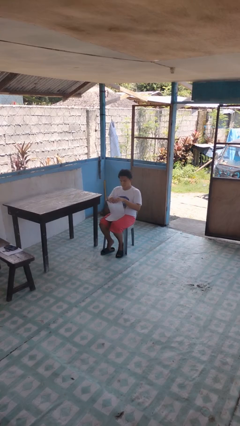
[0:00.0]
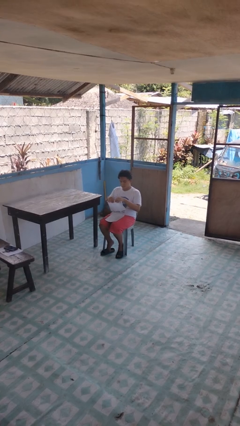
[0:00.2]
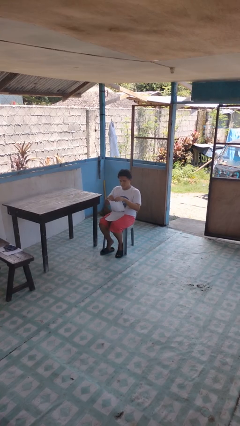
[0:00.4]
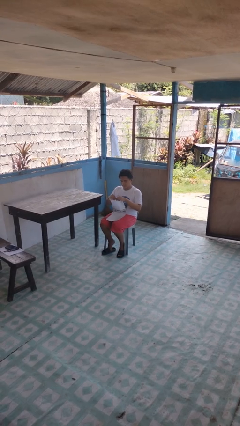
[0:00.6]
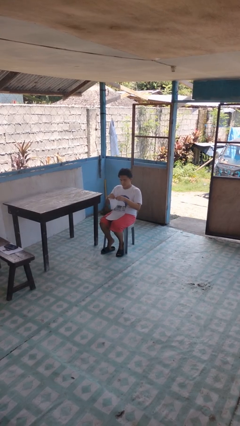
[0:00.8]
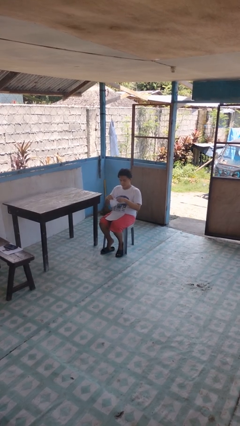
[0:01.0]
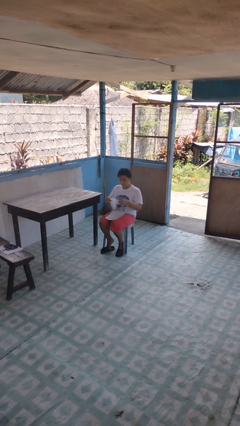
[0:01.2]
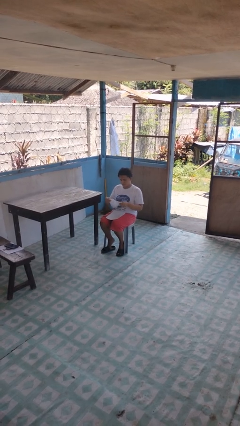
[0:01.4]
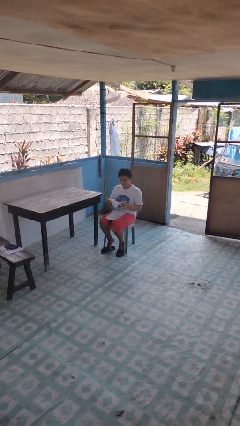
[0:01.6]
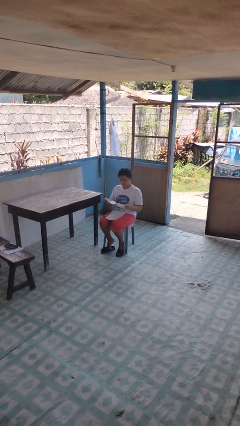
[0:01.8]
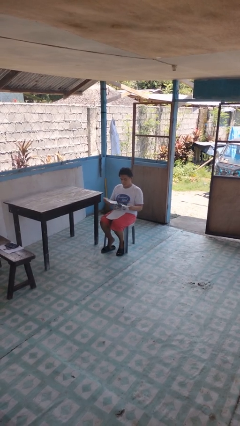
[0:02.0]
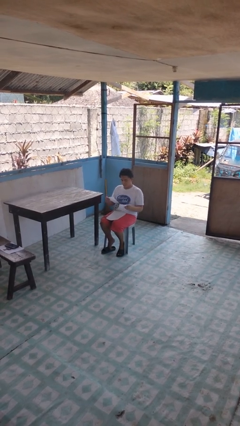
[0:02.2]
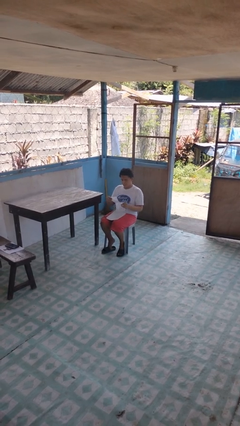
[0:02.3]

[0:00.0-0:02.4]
person tears paper

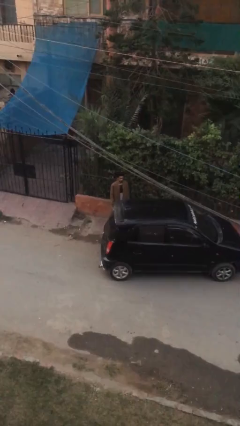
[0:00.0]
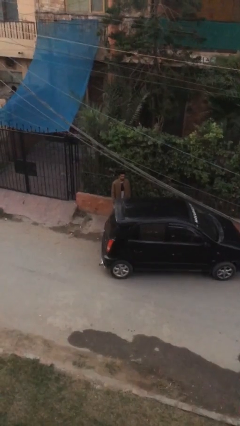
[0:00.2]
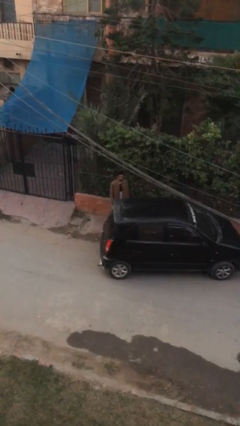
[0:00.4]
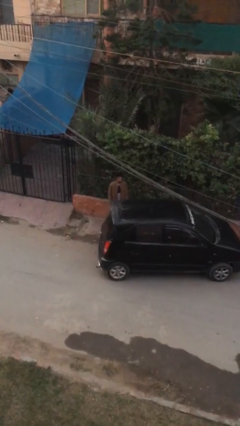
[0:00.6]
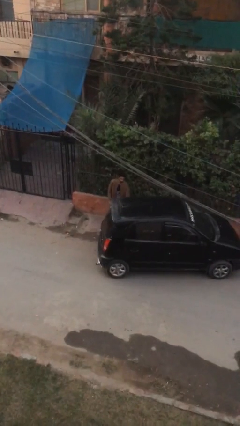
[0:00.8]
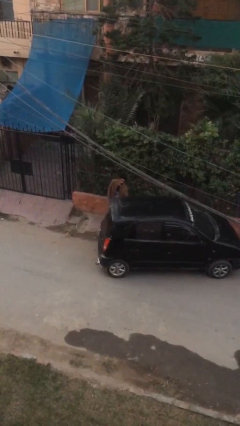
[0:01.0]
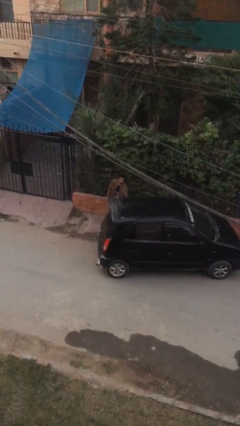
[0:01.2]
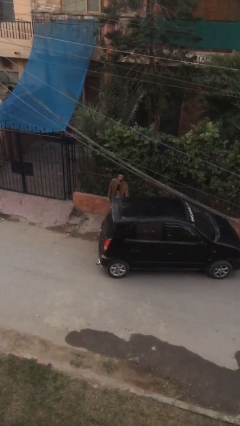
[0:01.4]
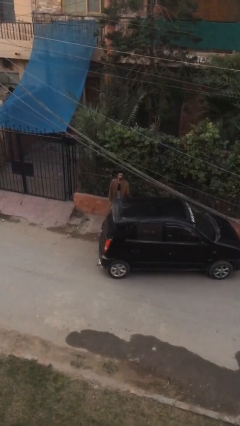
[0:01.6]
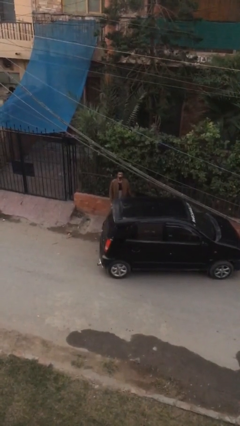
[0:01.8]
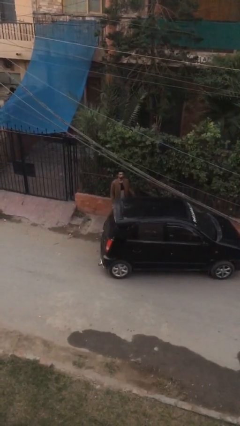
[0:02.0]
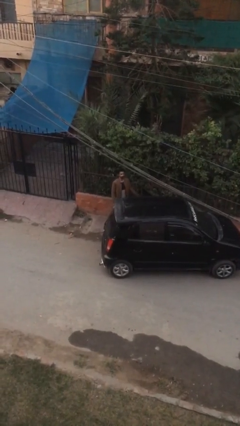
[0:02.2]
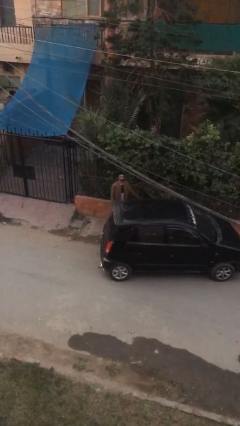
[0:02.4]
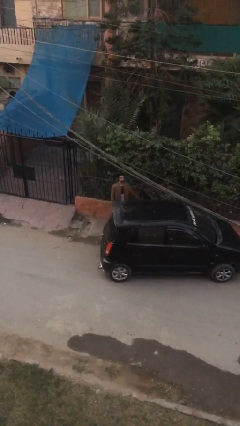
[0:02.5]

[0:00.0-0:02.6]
person opens car door

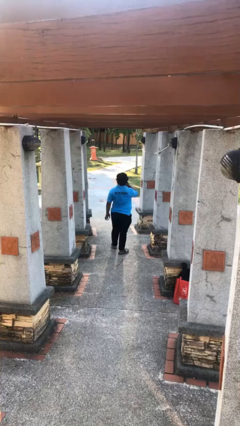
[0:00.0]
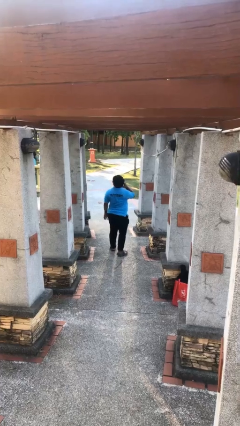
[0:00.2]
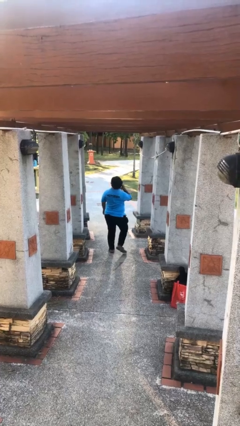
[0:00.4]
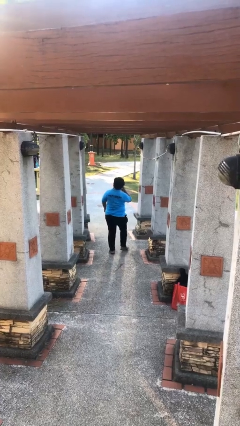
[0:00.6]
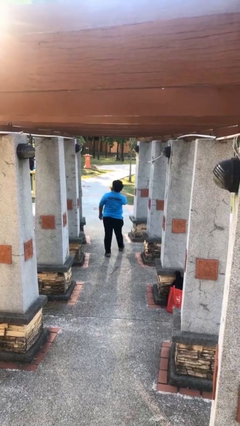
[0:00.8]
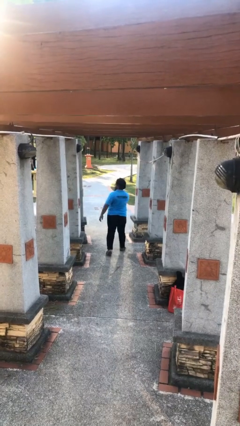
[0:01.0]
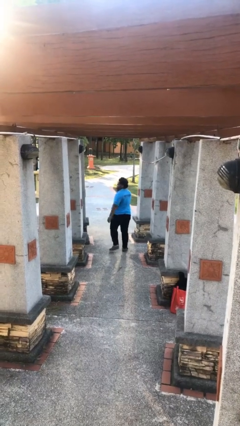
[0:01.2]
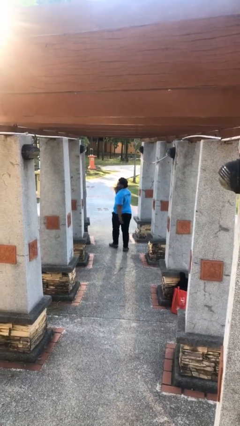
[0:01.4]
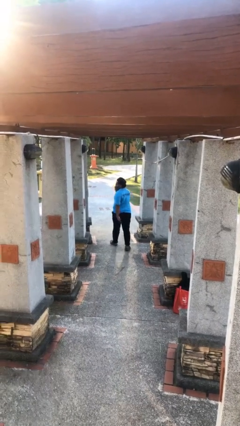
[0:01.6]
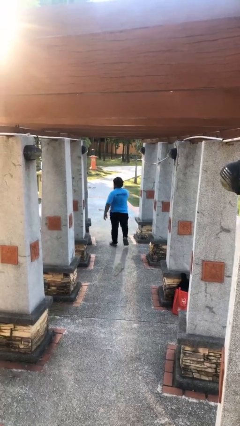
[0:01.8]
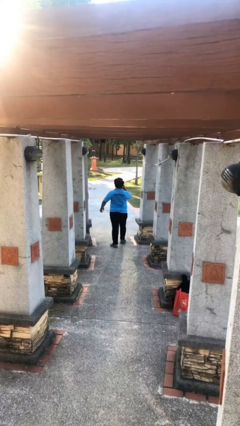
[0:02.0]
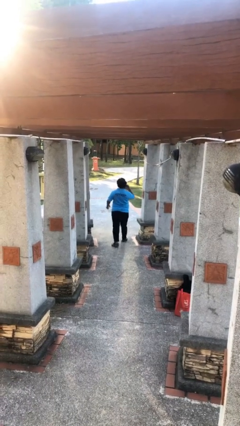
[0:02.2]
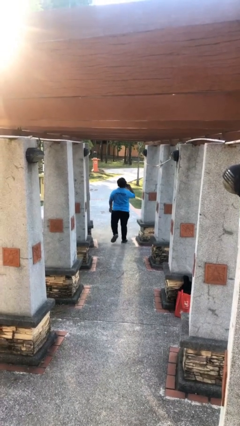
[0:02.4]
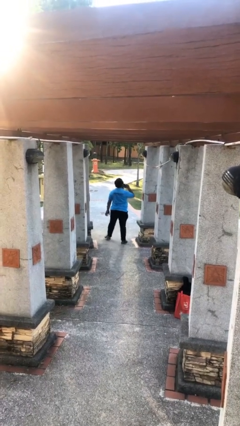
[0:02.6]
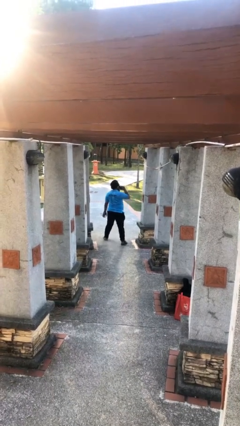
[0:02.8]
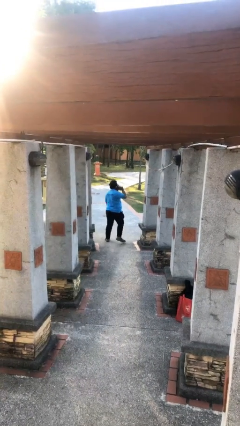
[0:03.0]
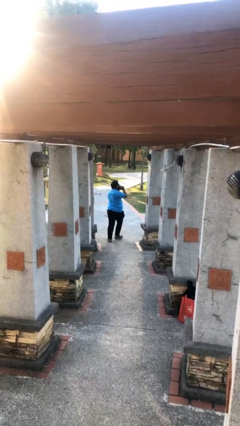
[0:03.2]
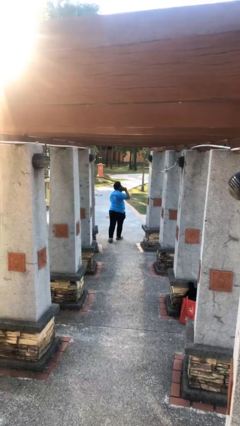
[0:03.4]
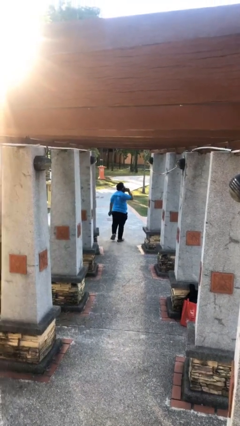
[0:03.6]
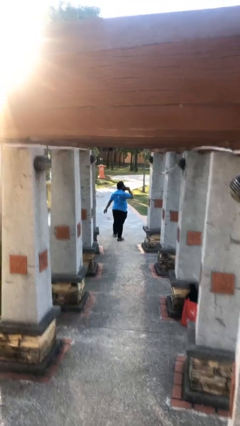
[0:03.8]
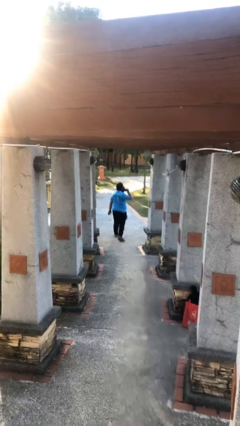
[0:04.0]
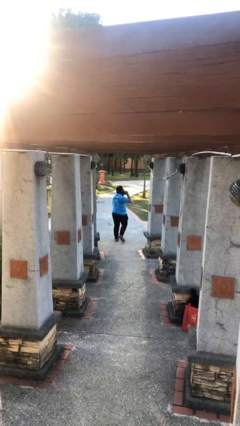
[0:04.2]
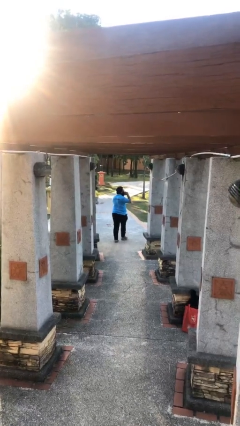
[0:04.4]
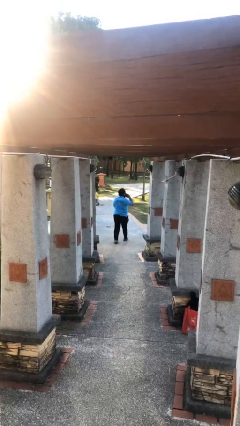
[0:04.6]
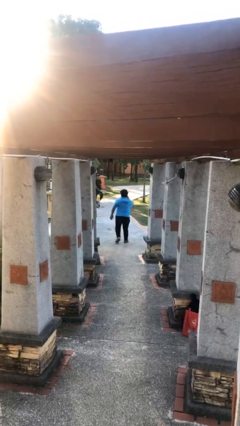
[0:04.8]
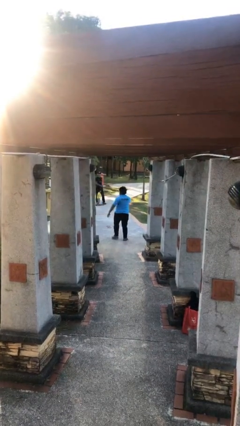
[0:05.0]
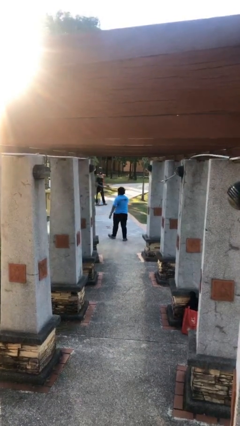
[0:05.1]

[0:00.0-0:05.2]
person exits scene through structure

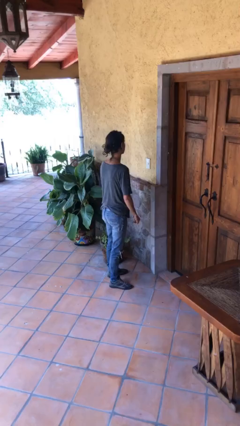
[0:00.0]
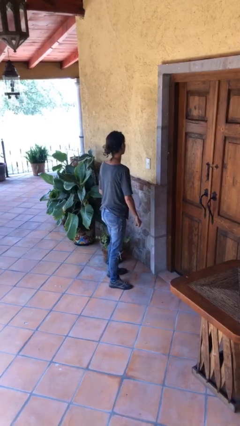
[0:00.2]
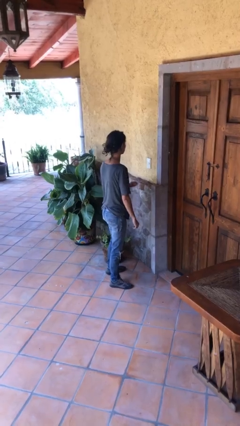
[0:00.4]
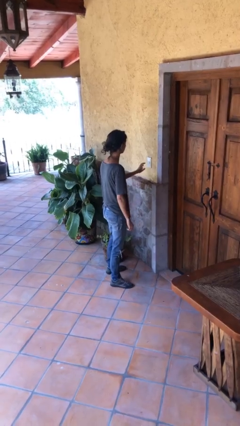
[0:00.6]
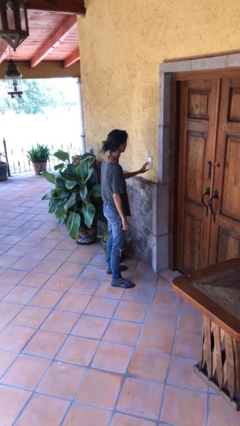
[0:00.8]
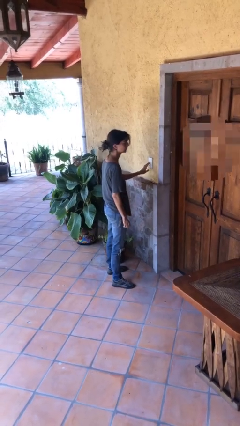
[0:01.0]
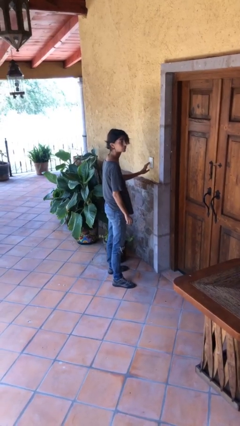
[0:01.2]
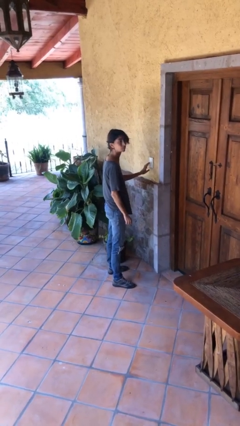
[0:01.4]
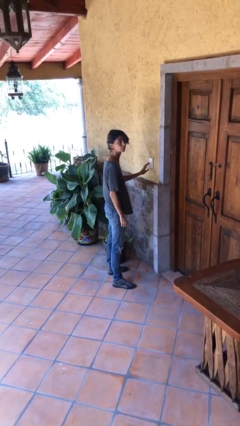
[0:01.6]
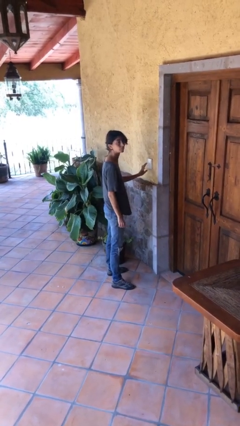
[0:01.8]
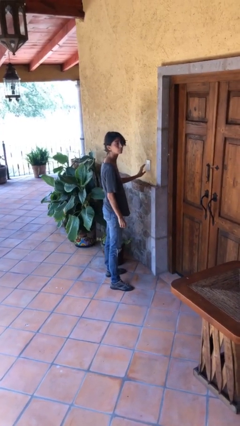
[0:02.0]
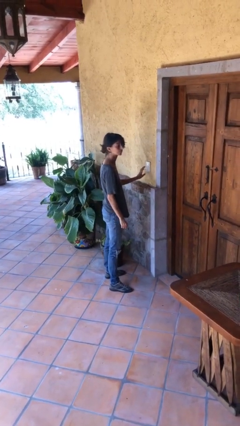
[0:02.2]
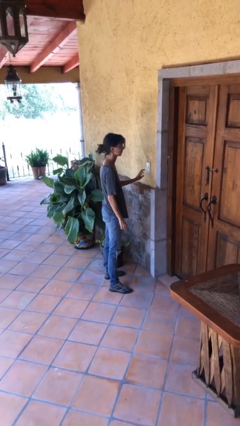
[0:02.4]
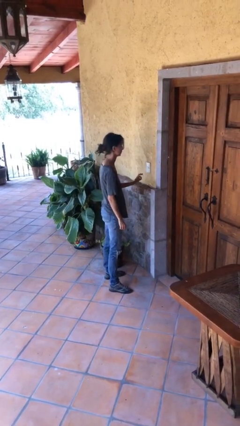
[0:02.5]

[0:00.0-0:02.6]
person adjusts thermostat

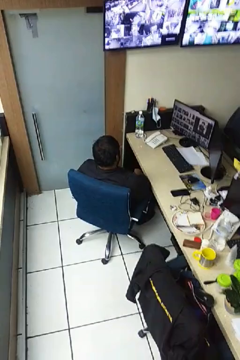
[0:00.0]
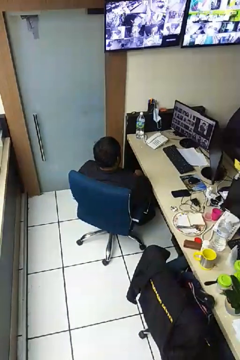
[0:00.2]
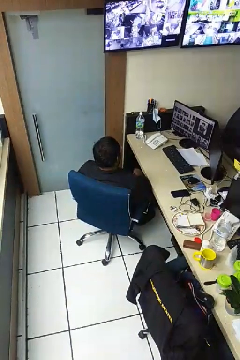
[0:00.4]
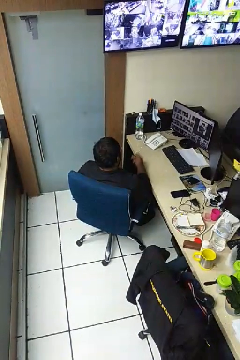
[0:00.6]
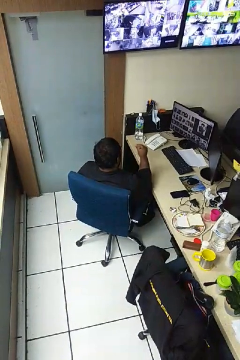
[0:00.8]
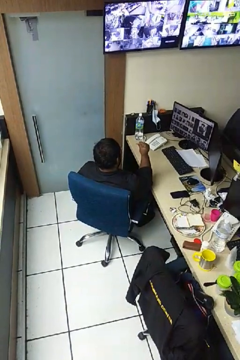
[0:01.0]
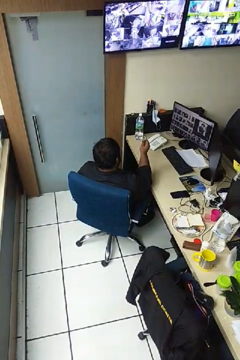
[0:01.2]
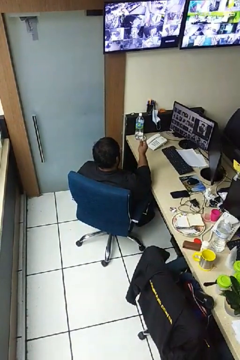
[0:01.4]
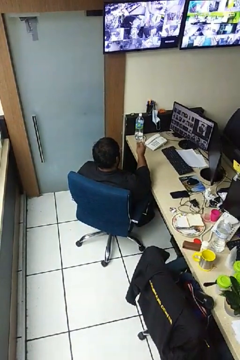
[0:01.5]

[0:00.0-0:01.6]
person snaps fingers

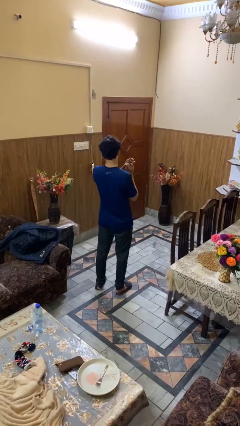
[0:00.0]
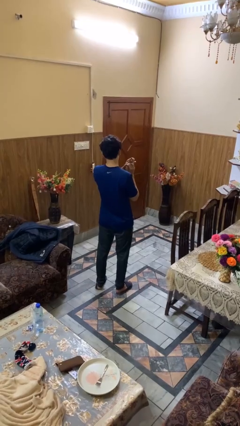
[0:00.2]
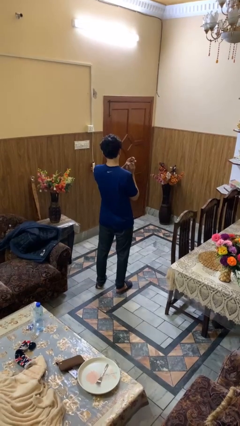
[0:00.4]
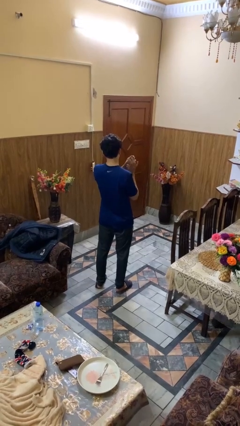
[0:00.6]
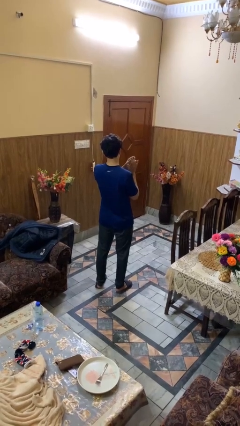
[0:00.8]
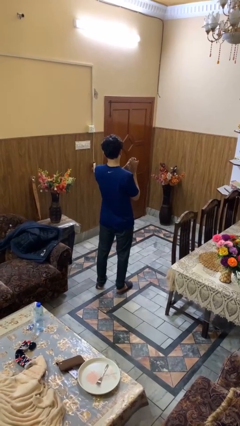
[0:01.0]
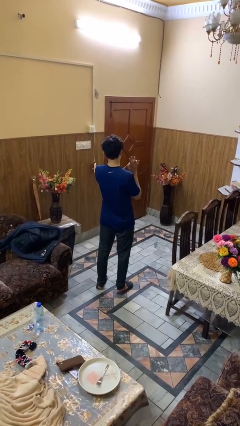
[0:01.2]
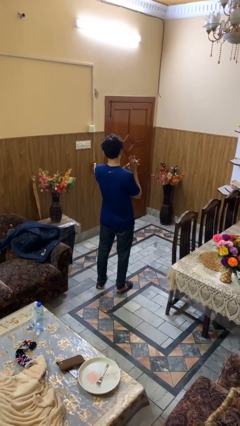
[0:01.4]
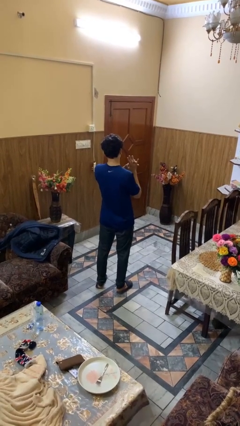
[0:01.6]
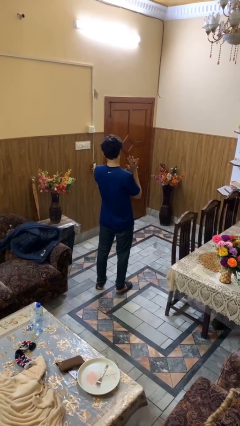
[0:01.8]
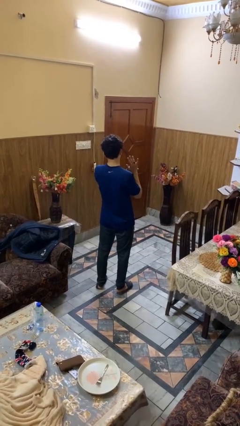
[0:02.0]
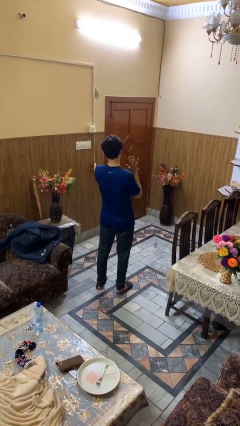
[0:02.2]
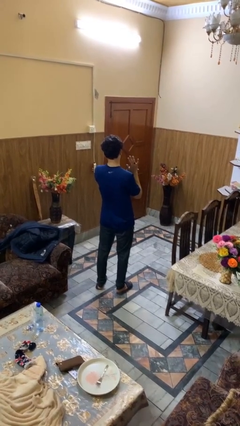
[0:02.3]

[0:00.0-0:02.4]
person puts on ring

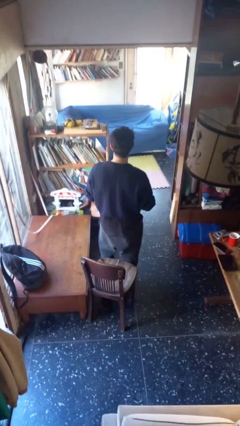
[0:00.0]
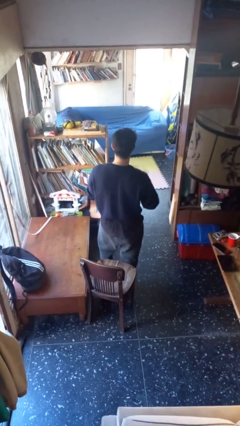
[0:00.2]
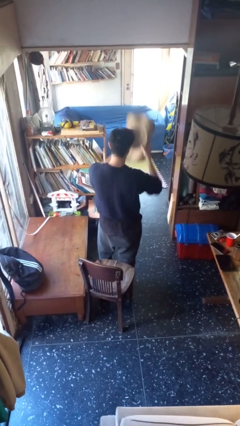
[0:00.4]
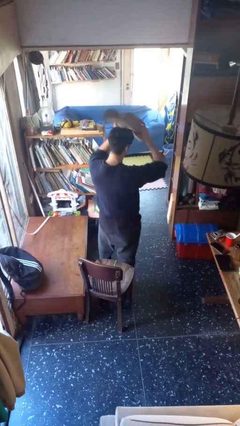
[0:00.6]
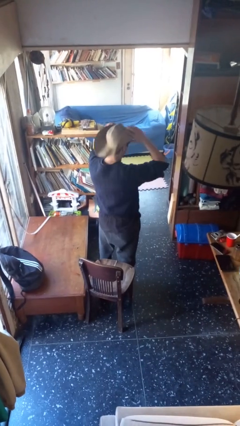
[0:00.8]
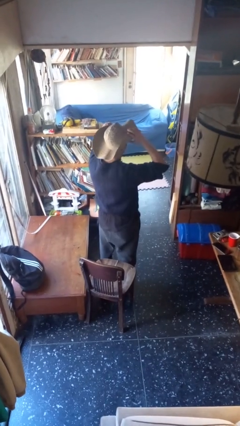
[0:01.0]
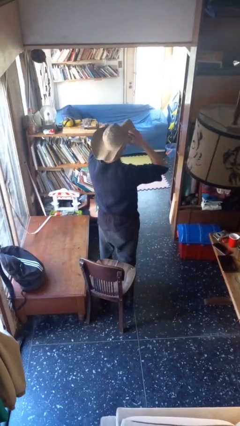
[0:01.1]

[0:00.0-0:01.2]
person puts on hat
